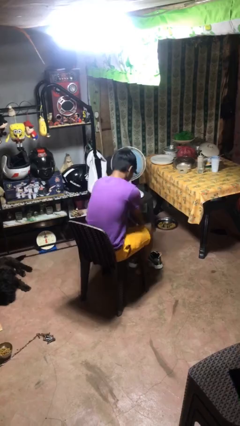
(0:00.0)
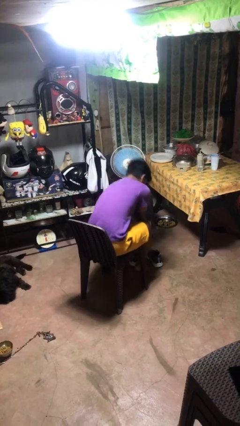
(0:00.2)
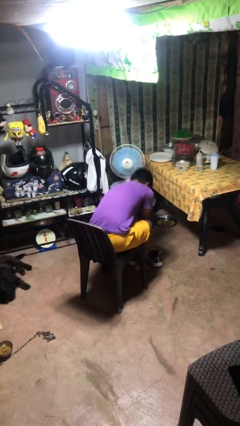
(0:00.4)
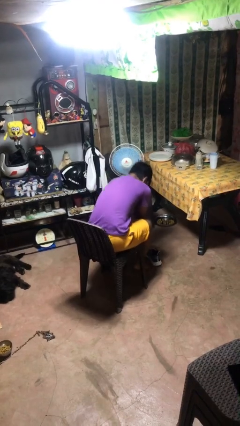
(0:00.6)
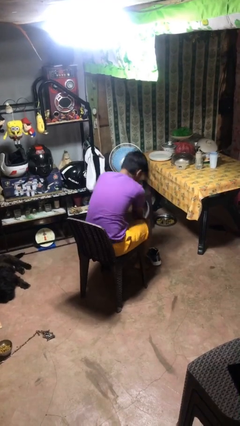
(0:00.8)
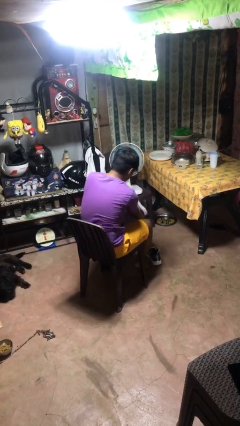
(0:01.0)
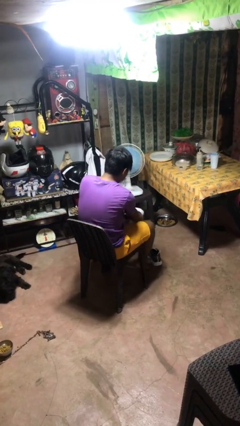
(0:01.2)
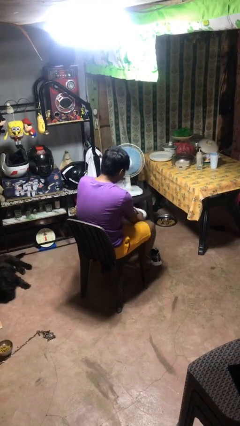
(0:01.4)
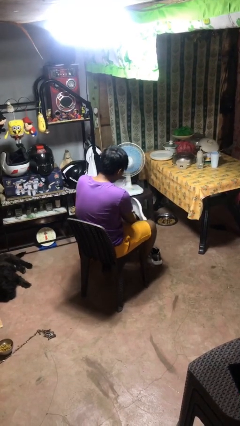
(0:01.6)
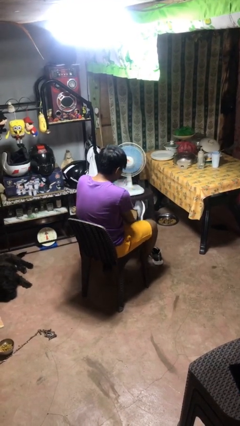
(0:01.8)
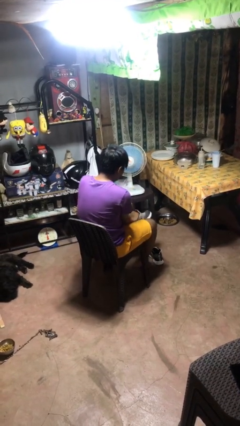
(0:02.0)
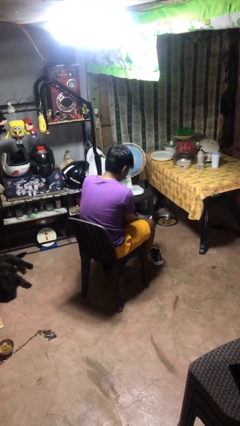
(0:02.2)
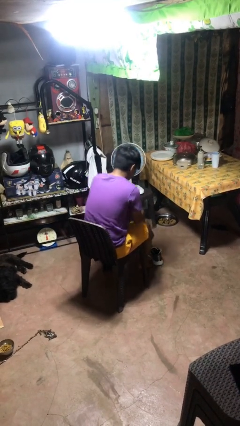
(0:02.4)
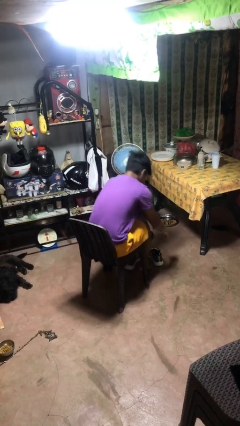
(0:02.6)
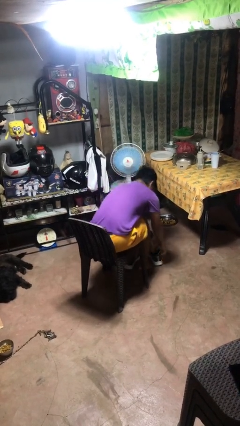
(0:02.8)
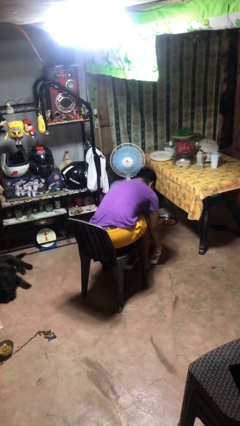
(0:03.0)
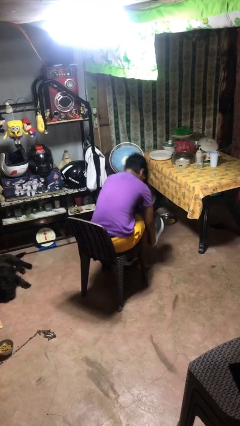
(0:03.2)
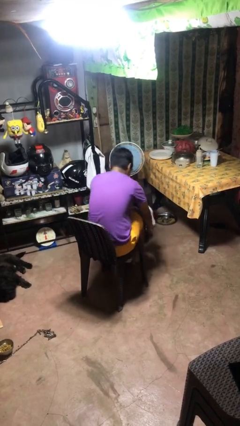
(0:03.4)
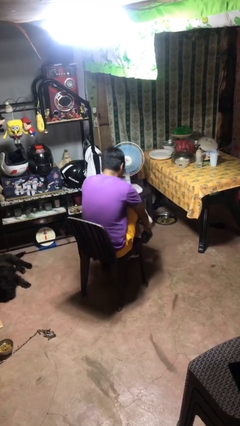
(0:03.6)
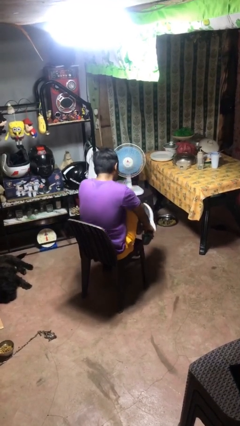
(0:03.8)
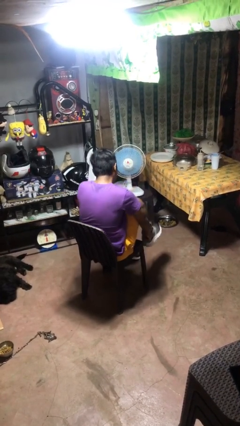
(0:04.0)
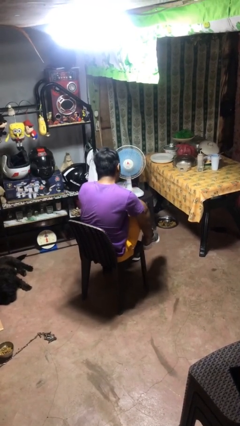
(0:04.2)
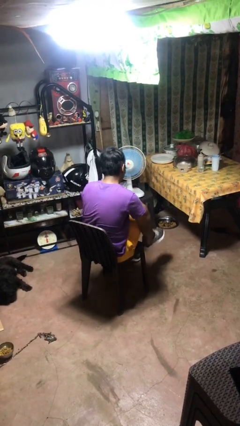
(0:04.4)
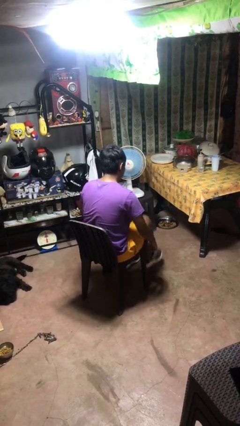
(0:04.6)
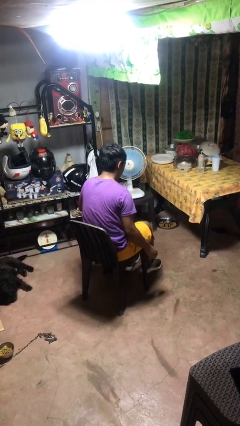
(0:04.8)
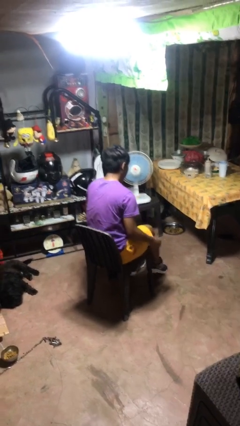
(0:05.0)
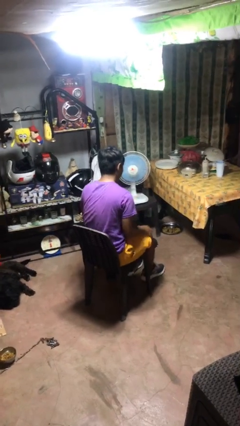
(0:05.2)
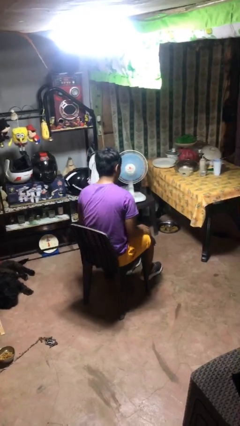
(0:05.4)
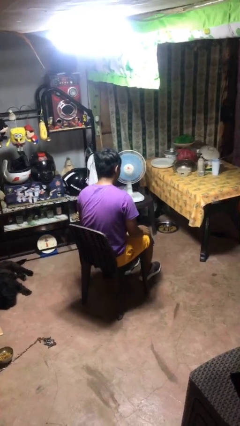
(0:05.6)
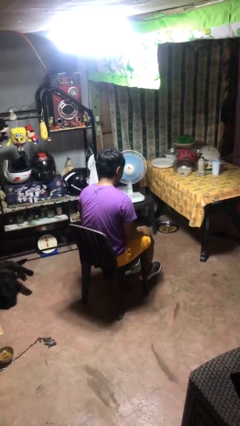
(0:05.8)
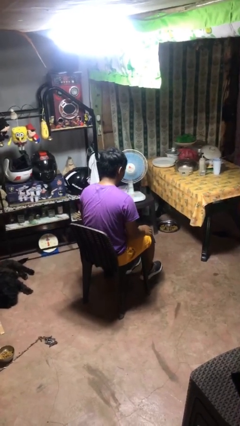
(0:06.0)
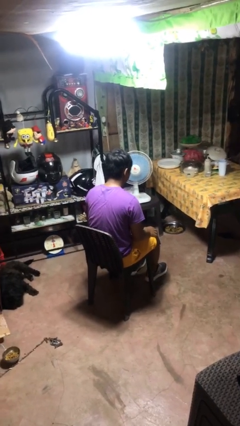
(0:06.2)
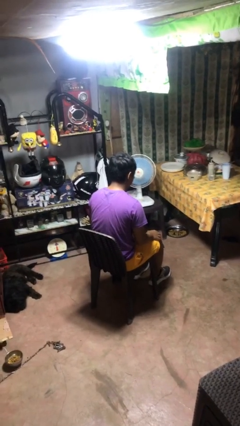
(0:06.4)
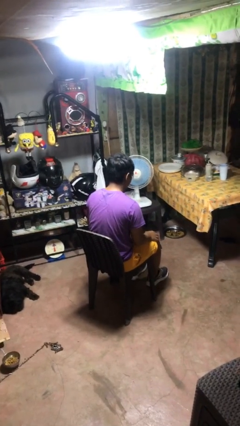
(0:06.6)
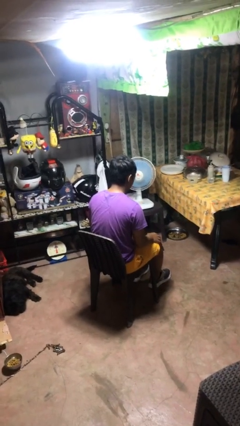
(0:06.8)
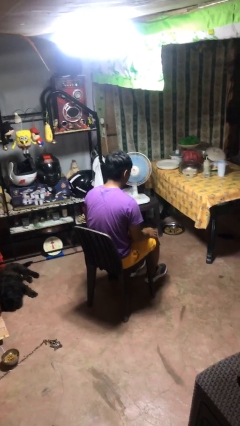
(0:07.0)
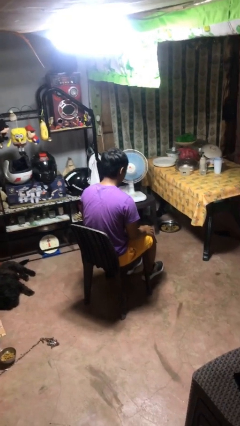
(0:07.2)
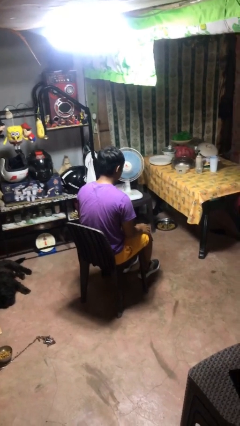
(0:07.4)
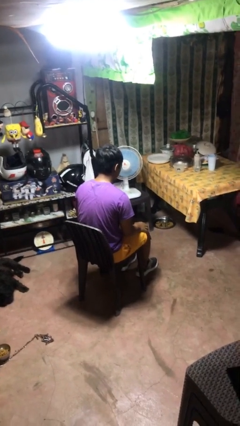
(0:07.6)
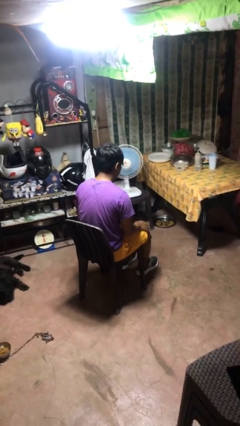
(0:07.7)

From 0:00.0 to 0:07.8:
person puts on shoes

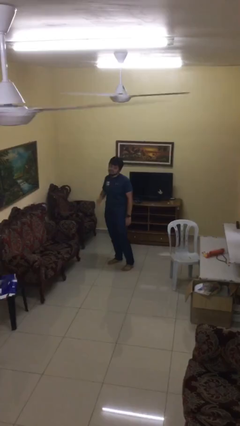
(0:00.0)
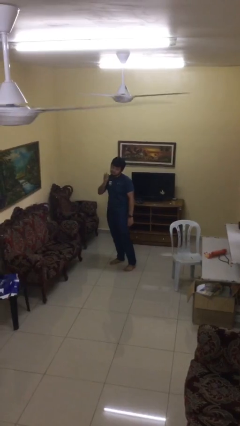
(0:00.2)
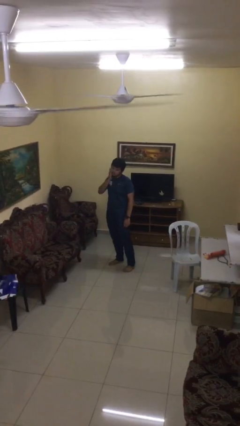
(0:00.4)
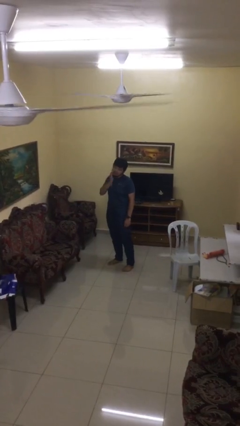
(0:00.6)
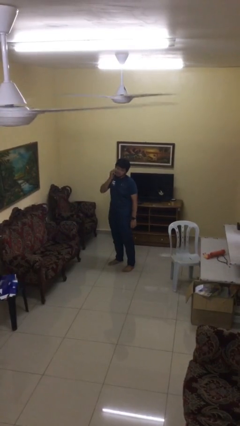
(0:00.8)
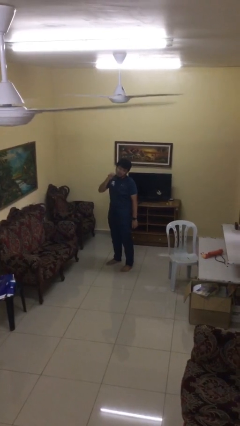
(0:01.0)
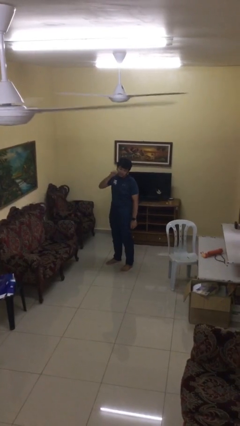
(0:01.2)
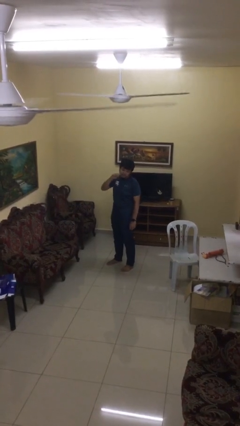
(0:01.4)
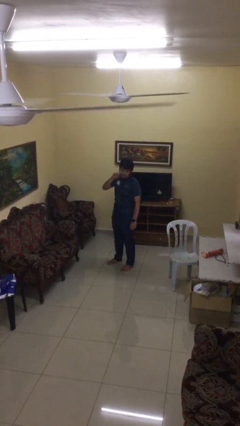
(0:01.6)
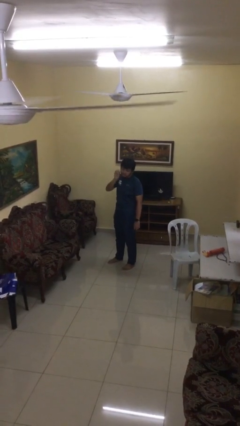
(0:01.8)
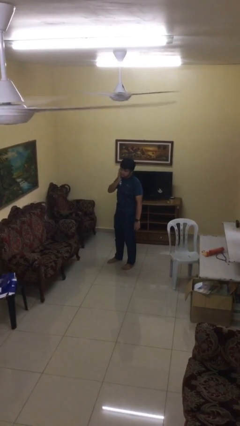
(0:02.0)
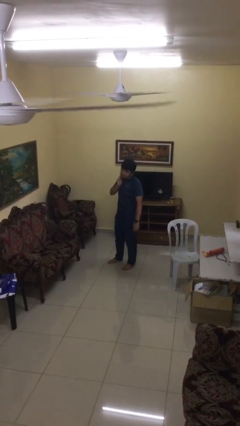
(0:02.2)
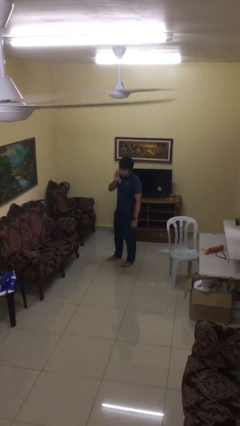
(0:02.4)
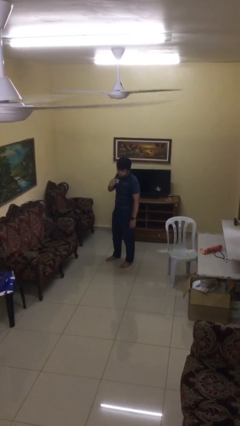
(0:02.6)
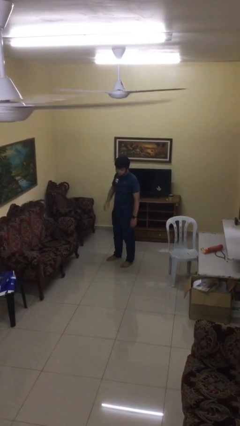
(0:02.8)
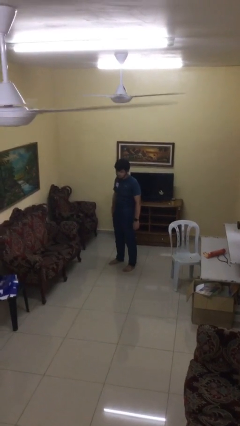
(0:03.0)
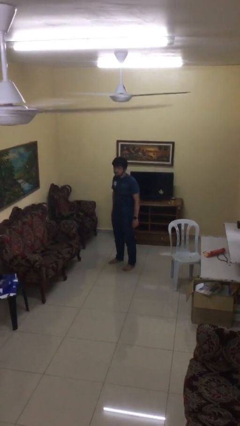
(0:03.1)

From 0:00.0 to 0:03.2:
person scratches face

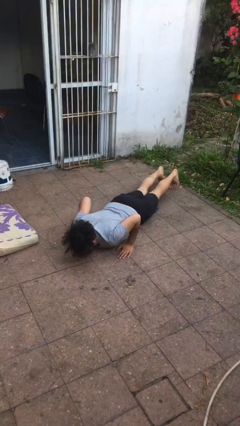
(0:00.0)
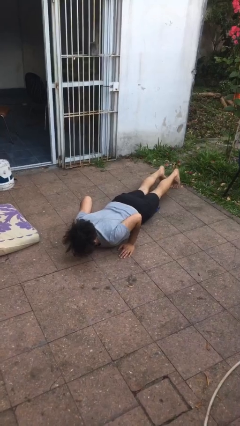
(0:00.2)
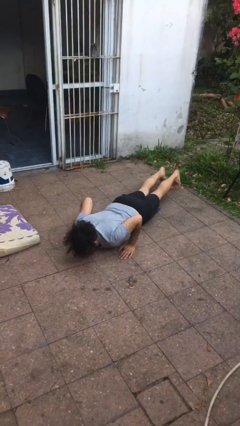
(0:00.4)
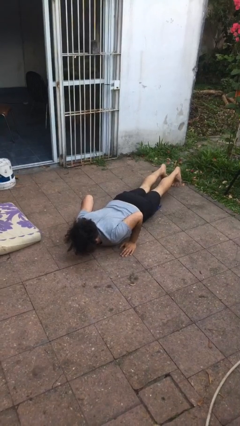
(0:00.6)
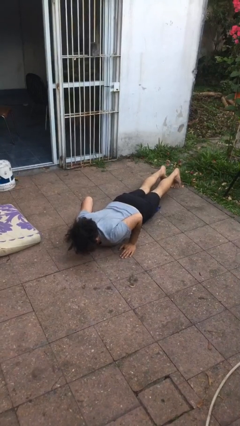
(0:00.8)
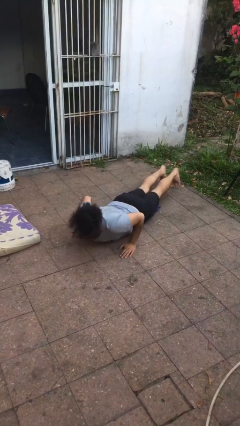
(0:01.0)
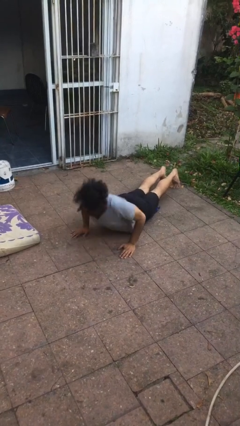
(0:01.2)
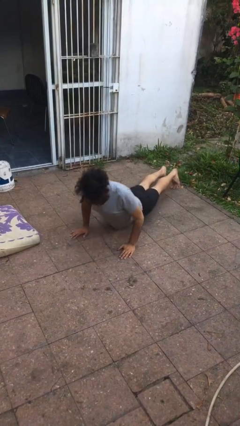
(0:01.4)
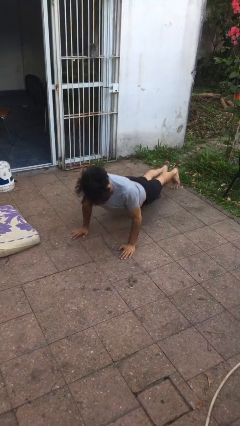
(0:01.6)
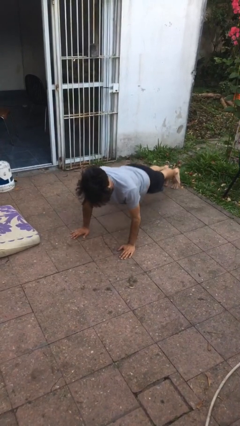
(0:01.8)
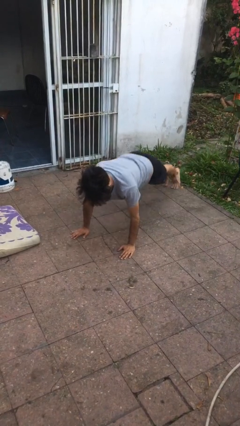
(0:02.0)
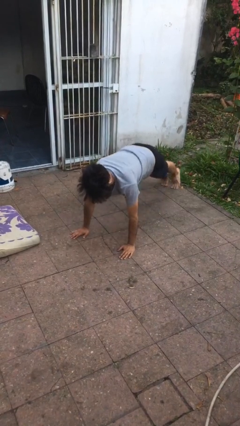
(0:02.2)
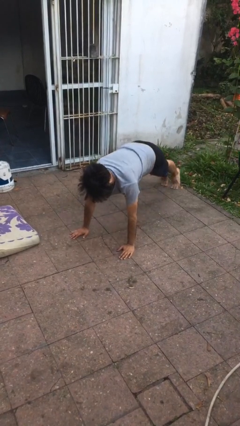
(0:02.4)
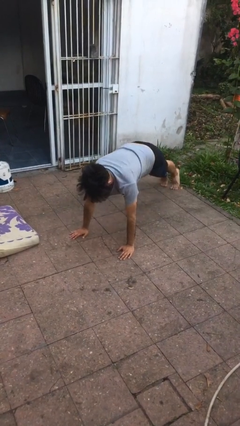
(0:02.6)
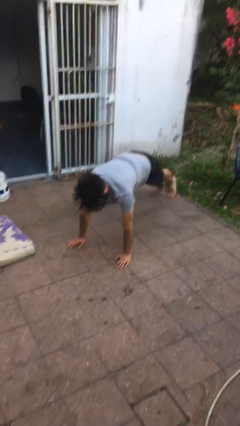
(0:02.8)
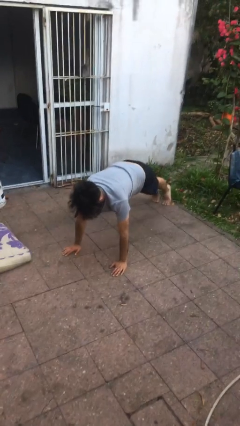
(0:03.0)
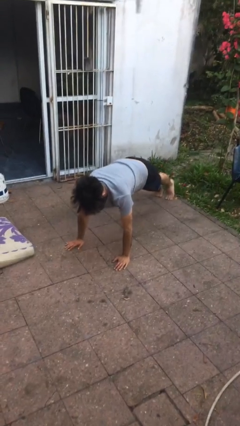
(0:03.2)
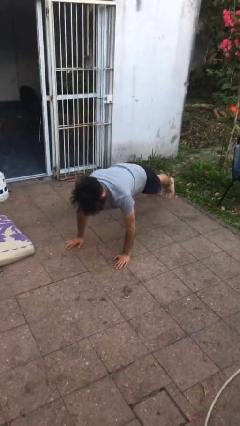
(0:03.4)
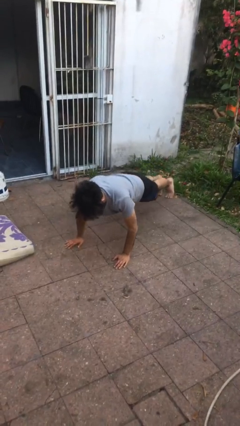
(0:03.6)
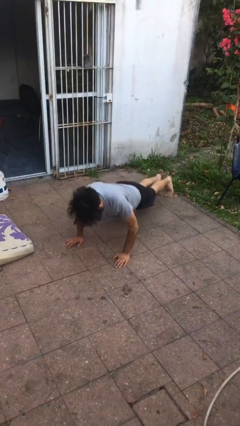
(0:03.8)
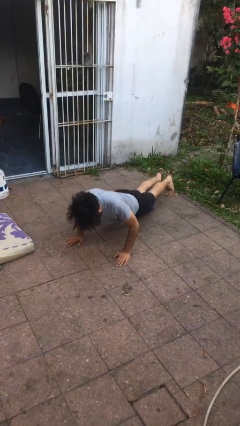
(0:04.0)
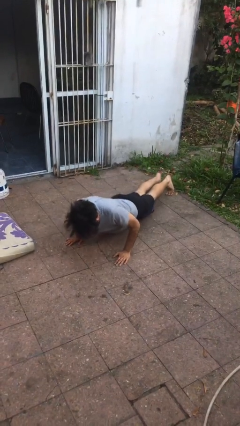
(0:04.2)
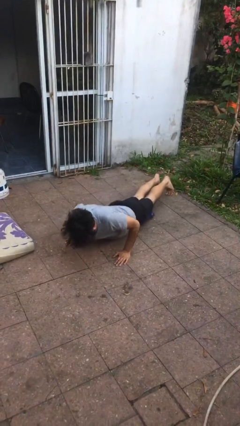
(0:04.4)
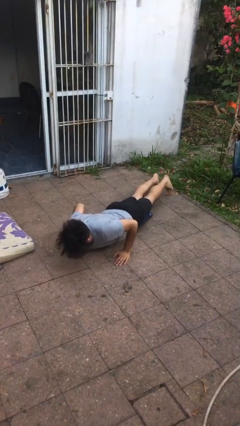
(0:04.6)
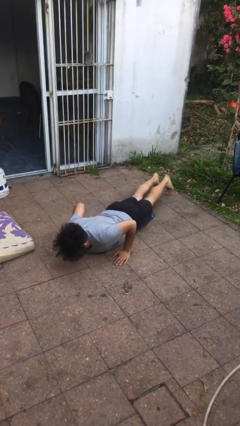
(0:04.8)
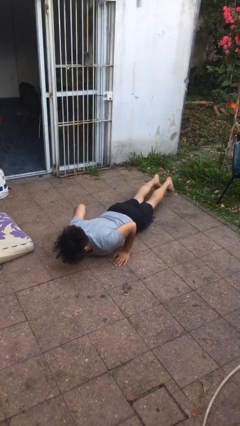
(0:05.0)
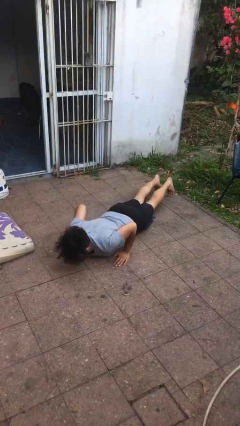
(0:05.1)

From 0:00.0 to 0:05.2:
person exercises with pushup

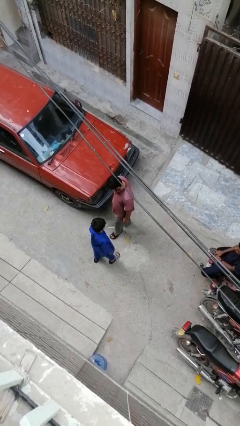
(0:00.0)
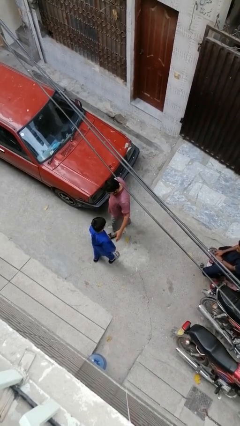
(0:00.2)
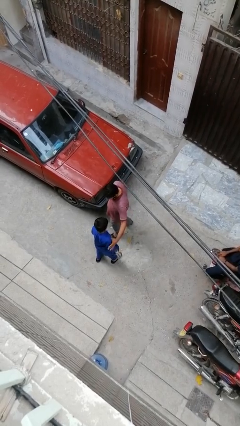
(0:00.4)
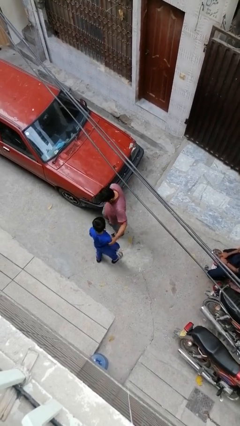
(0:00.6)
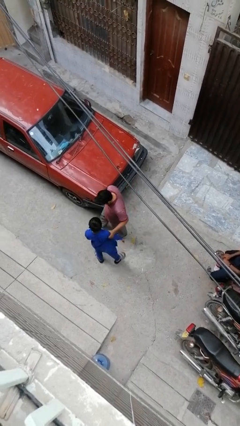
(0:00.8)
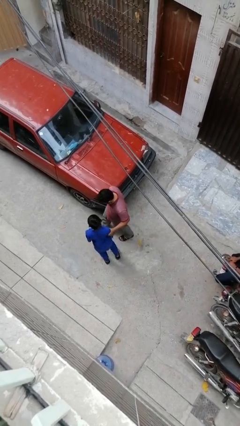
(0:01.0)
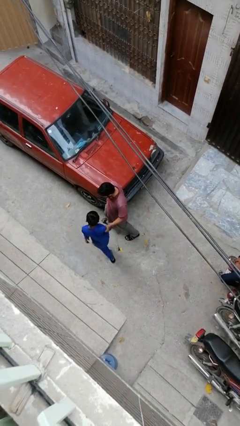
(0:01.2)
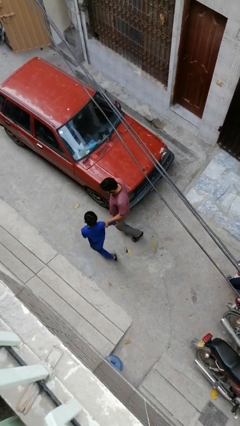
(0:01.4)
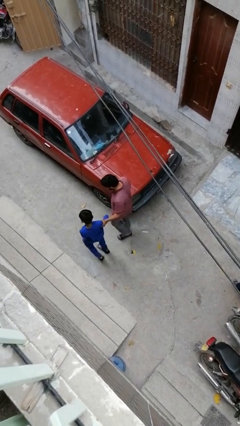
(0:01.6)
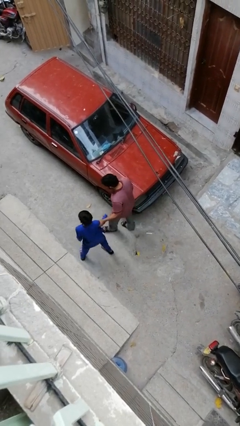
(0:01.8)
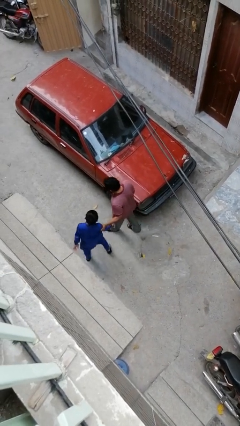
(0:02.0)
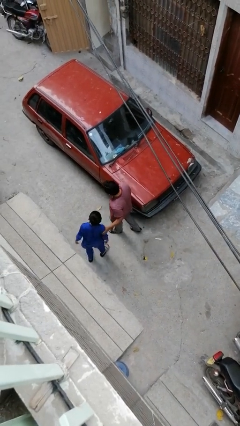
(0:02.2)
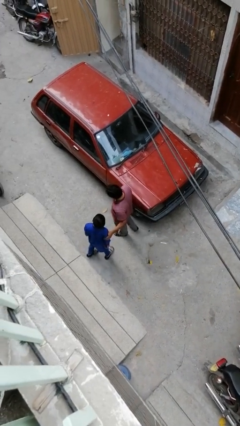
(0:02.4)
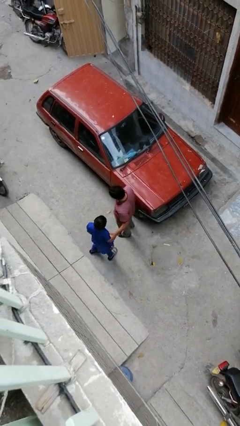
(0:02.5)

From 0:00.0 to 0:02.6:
person grabs person by bicep
